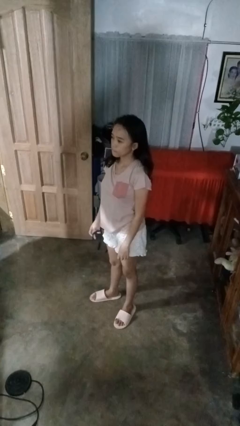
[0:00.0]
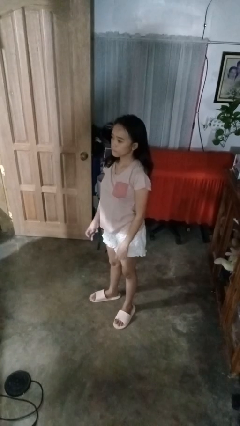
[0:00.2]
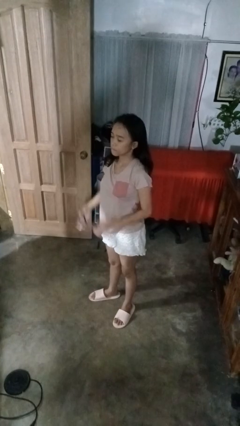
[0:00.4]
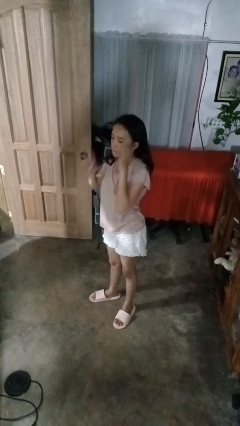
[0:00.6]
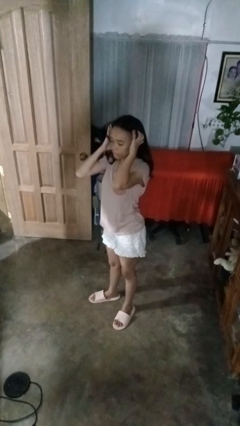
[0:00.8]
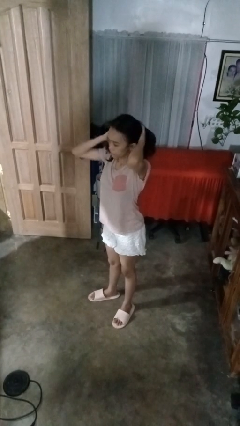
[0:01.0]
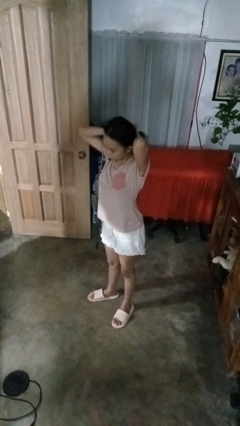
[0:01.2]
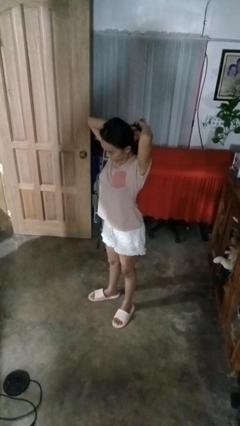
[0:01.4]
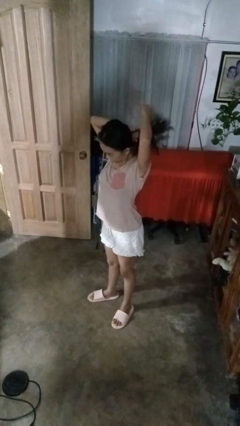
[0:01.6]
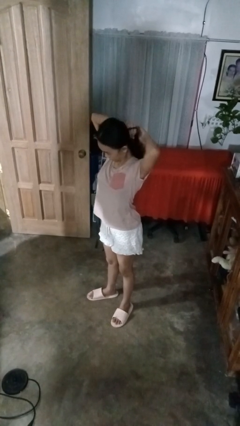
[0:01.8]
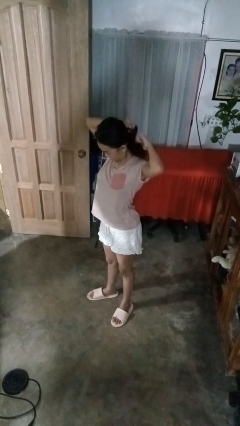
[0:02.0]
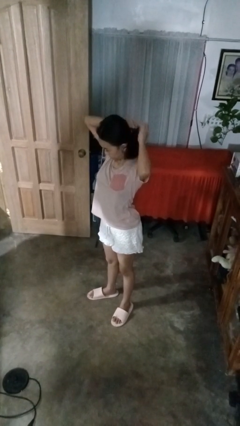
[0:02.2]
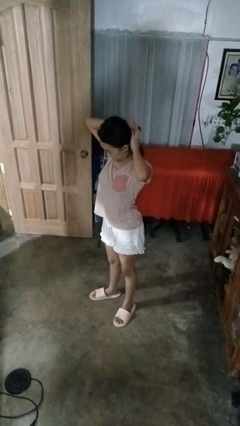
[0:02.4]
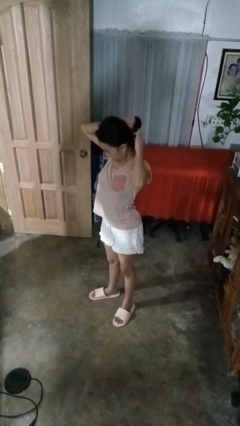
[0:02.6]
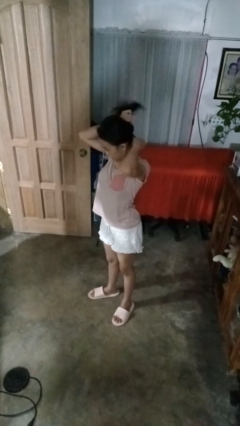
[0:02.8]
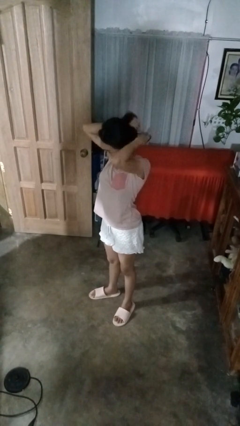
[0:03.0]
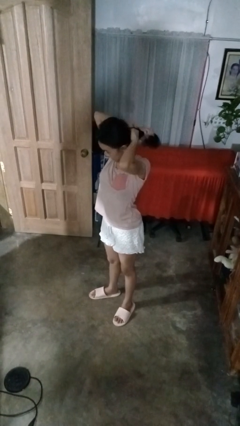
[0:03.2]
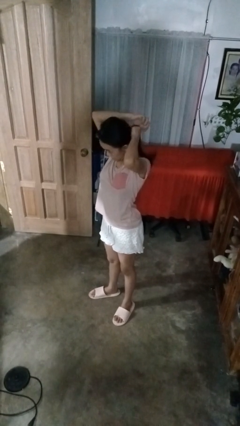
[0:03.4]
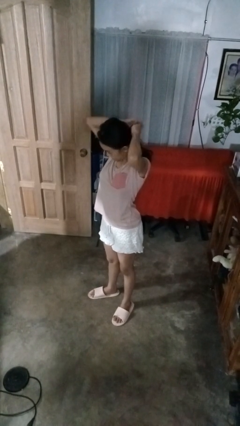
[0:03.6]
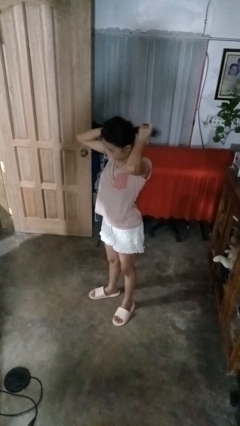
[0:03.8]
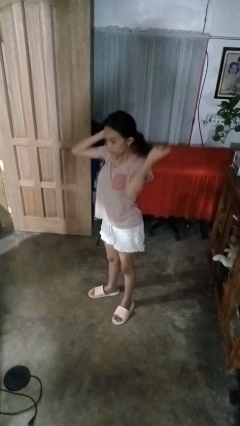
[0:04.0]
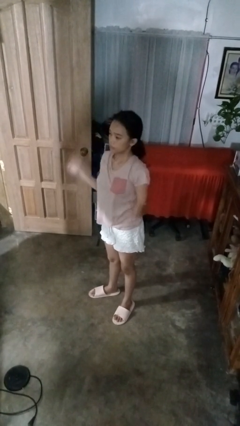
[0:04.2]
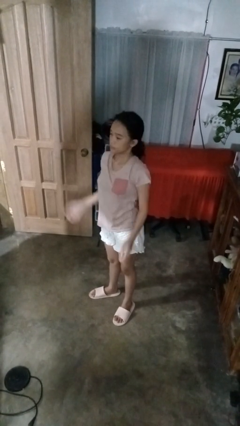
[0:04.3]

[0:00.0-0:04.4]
person puts hair in ponytail

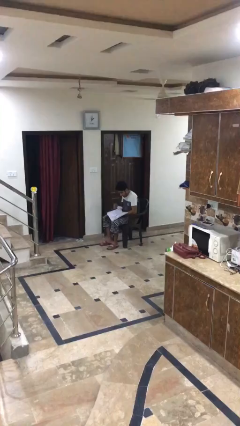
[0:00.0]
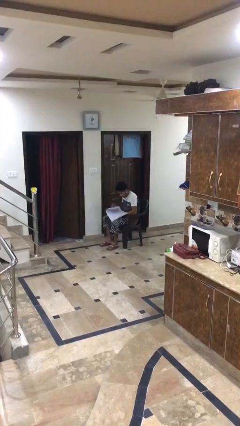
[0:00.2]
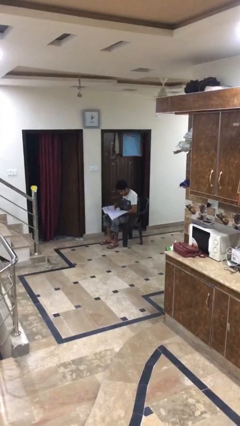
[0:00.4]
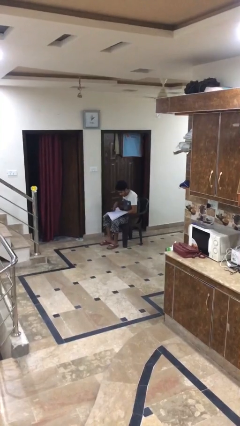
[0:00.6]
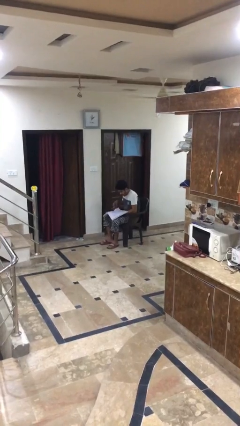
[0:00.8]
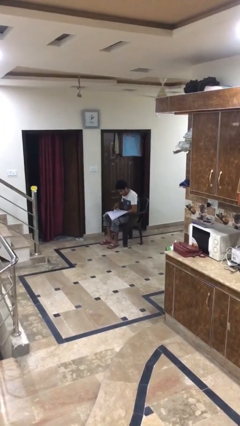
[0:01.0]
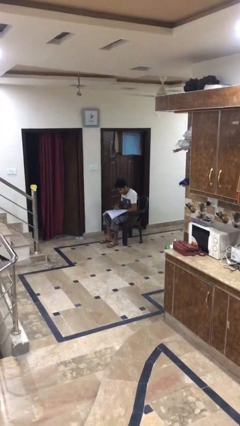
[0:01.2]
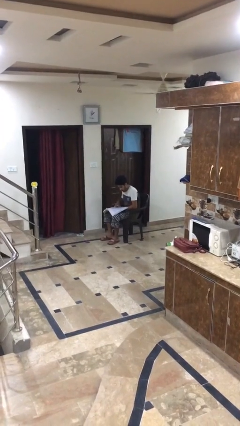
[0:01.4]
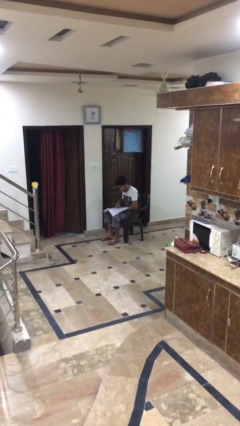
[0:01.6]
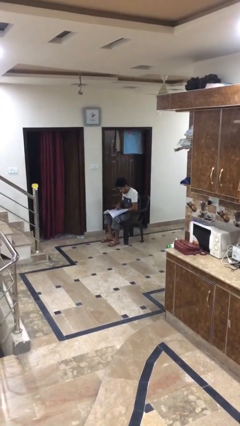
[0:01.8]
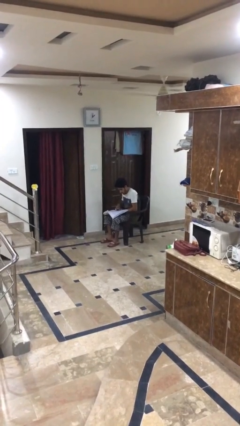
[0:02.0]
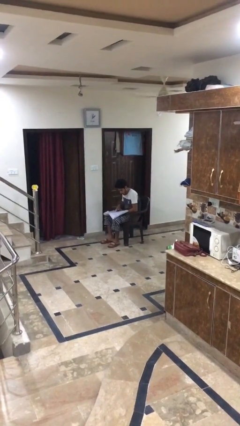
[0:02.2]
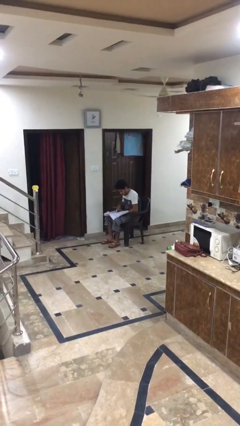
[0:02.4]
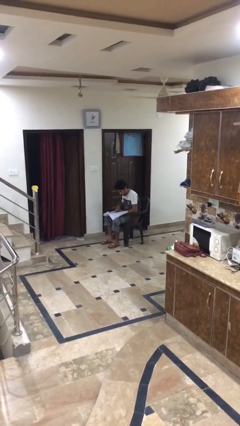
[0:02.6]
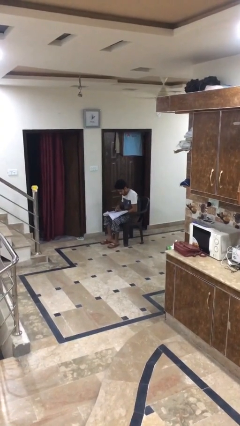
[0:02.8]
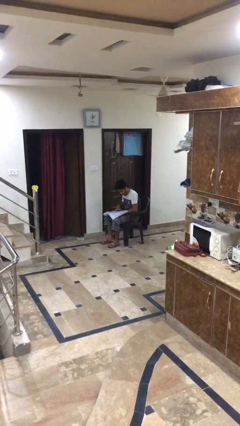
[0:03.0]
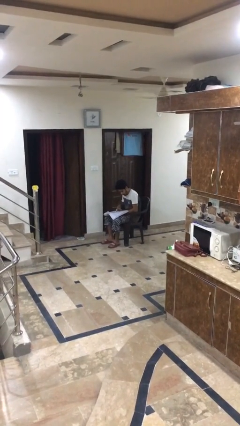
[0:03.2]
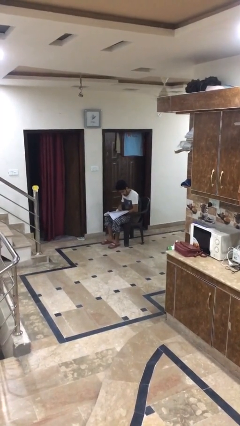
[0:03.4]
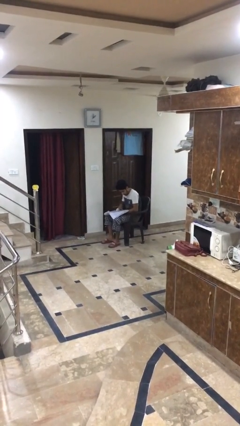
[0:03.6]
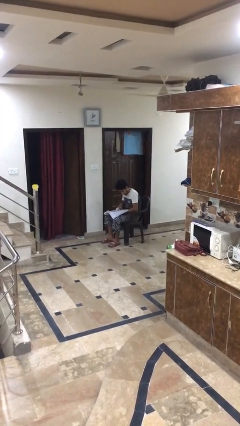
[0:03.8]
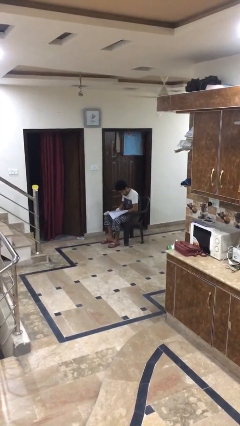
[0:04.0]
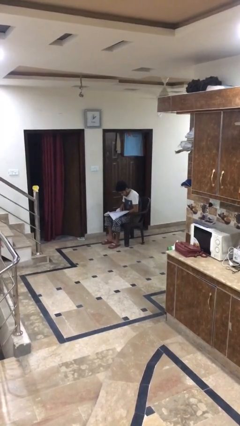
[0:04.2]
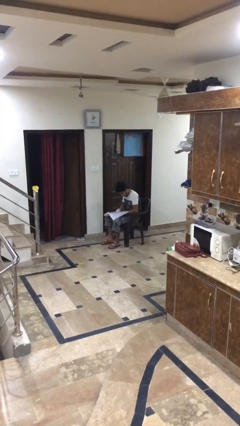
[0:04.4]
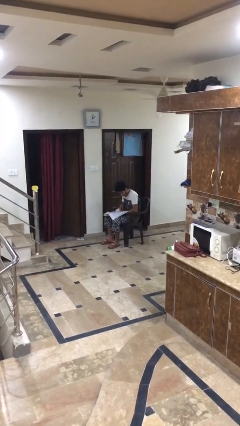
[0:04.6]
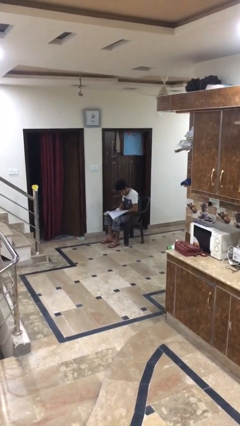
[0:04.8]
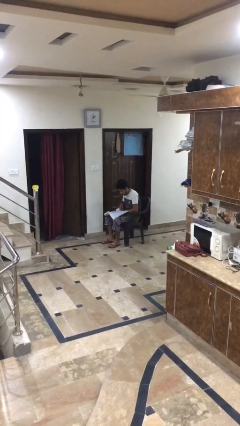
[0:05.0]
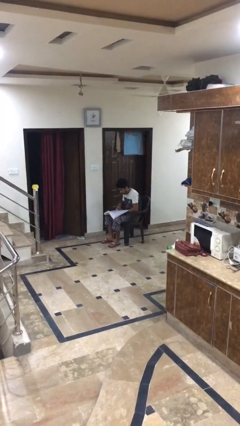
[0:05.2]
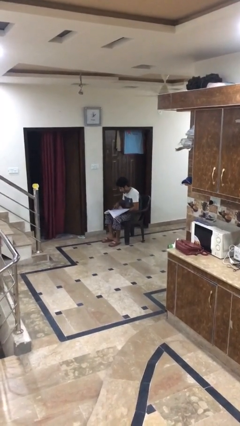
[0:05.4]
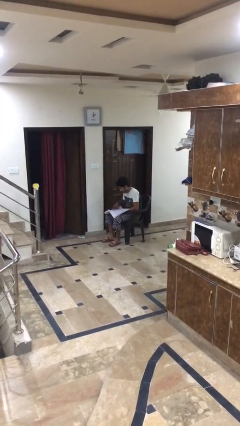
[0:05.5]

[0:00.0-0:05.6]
person reads document

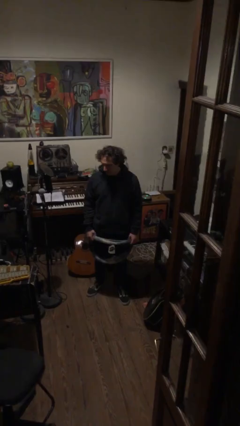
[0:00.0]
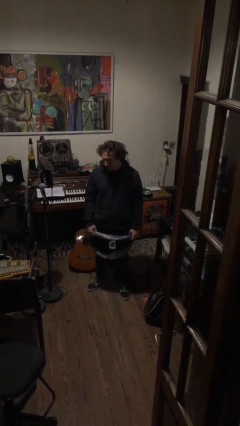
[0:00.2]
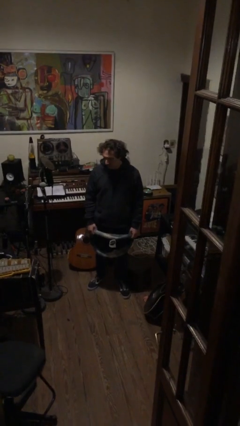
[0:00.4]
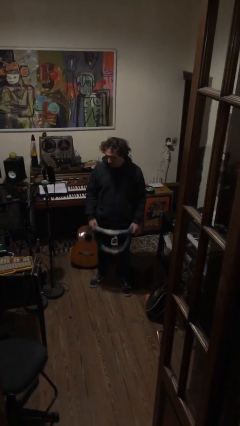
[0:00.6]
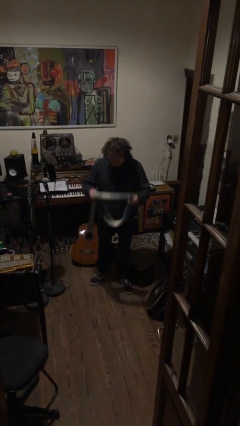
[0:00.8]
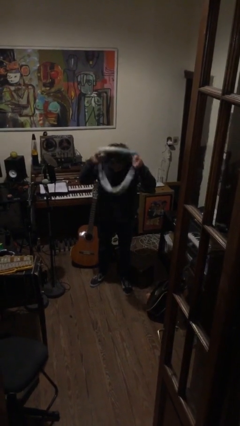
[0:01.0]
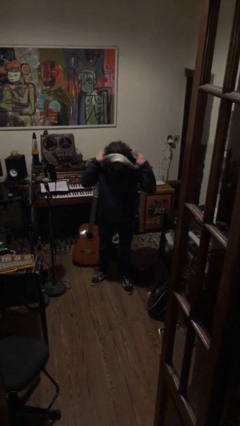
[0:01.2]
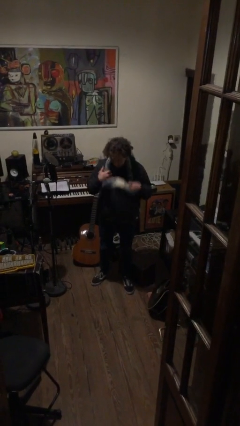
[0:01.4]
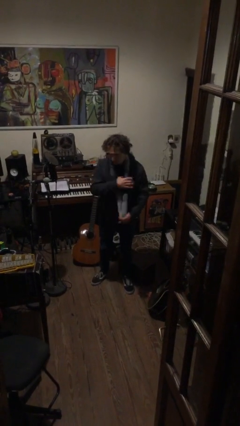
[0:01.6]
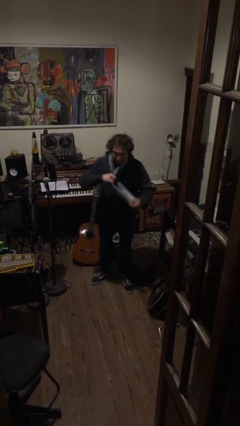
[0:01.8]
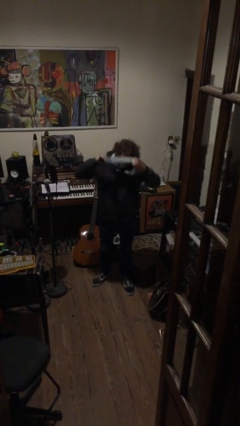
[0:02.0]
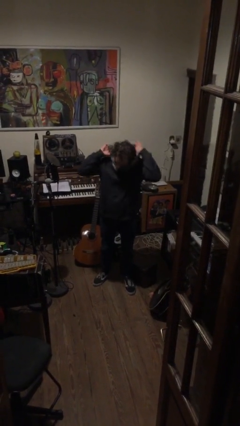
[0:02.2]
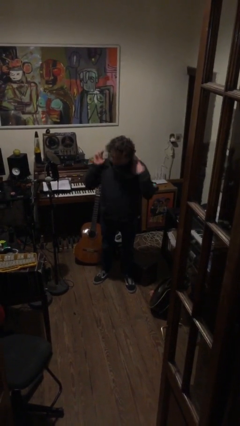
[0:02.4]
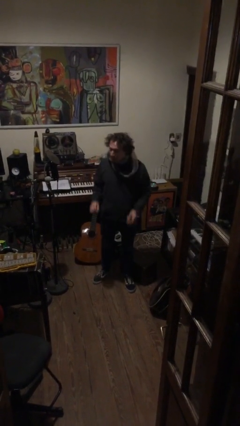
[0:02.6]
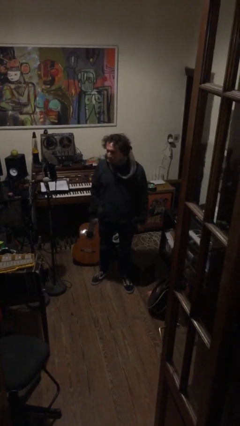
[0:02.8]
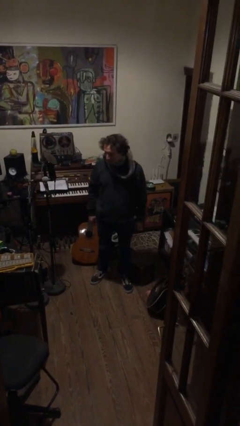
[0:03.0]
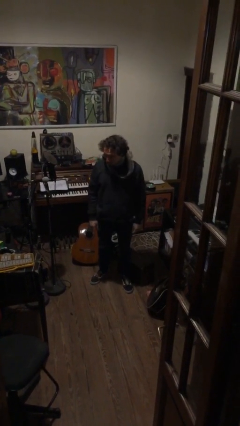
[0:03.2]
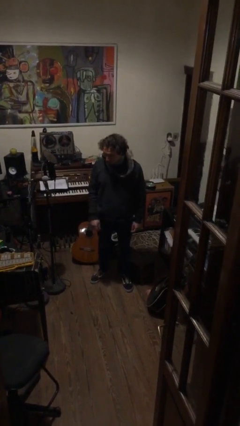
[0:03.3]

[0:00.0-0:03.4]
person puts on scarf

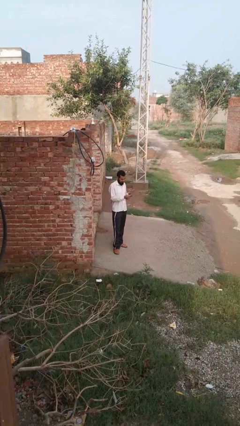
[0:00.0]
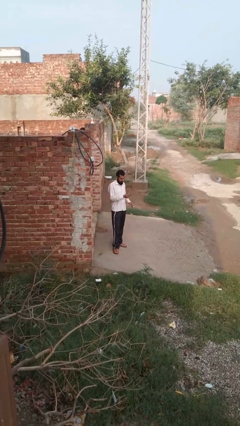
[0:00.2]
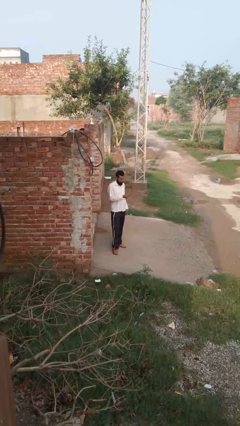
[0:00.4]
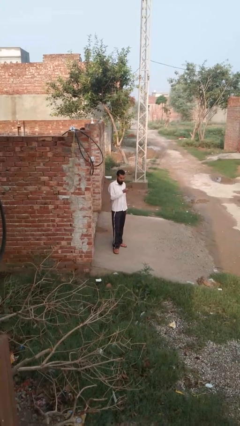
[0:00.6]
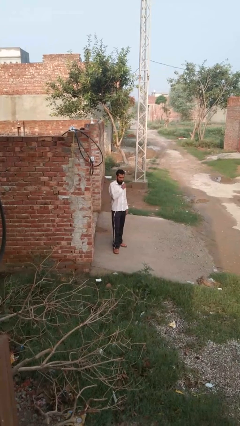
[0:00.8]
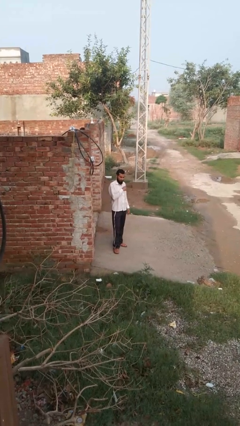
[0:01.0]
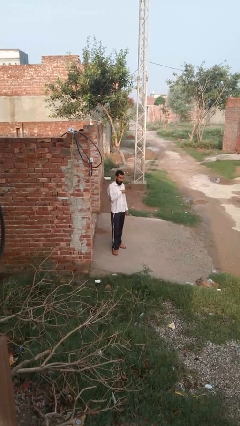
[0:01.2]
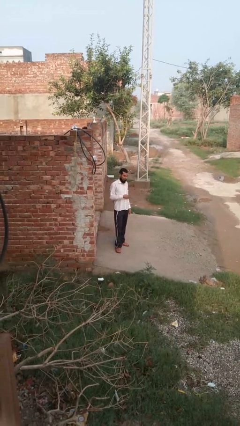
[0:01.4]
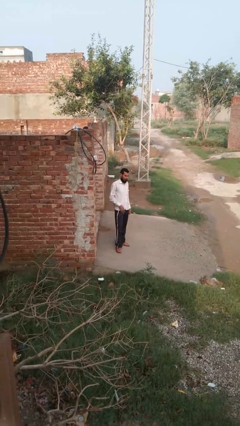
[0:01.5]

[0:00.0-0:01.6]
person puts phone into pocket

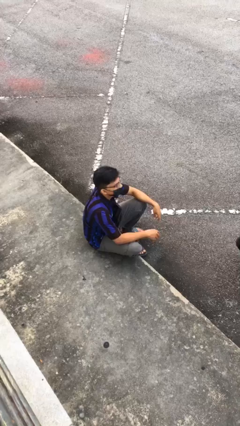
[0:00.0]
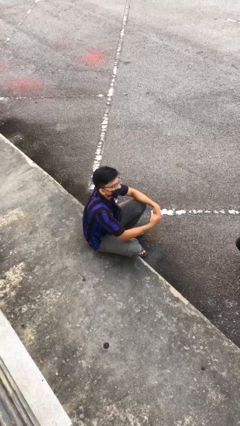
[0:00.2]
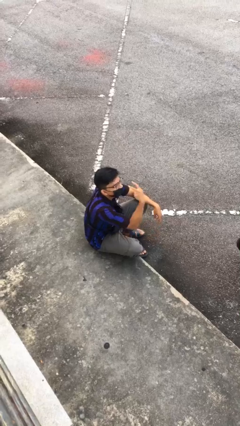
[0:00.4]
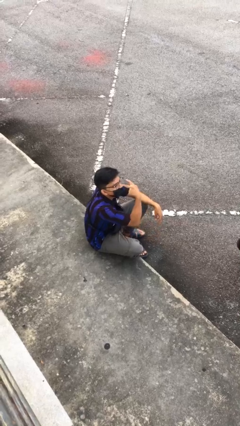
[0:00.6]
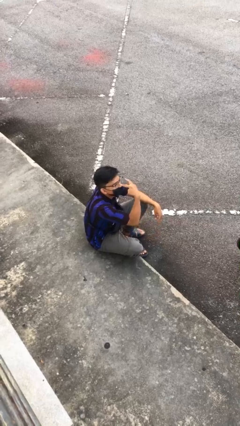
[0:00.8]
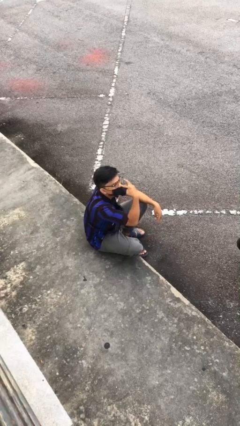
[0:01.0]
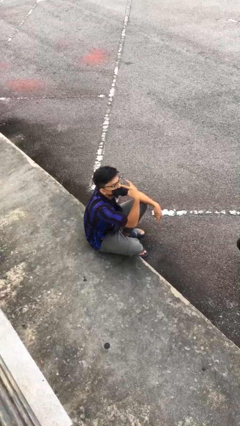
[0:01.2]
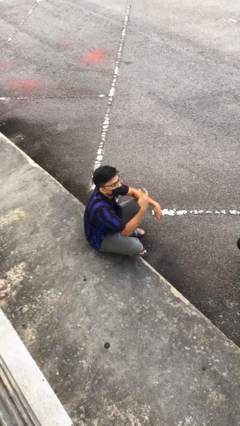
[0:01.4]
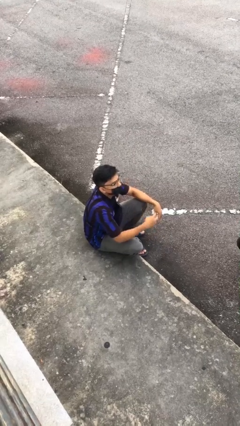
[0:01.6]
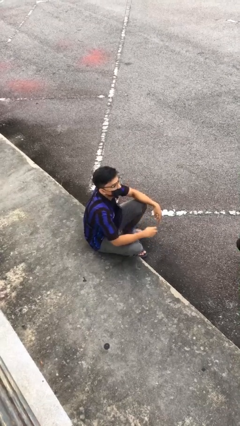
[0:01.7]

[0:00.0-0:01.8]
person gestures watch closely

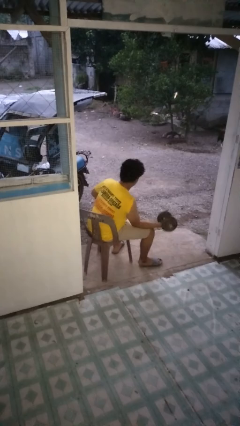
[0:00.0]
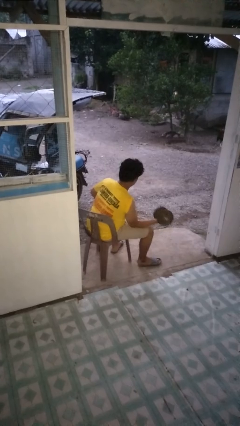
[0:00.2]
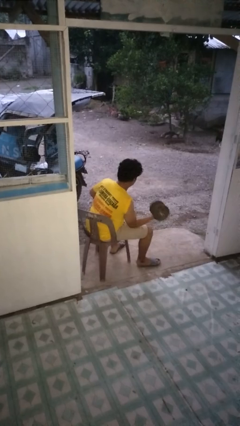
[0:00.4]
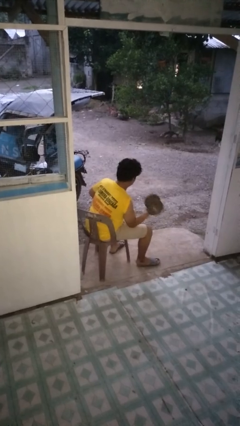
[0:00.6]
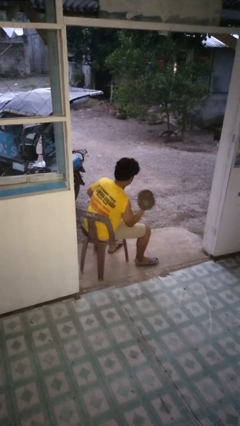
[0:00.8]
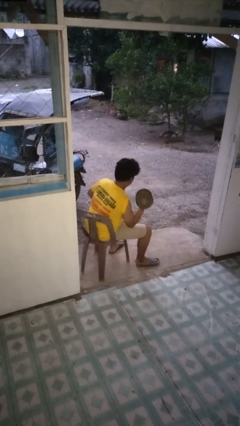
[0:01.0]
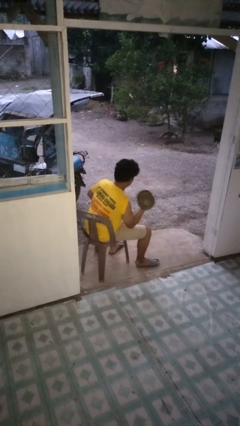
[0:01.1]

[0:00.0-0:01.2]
person lifts dumbbells
